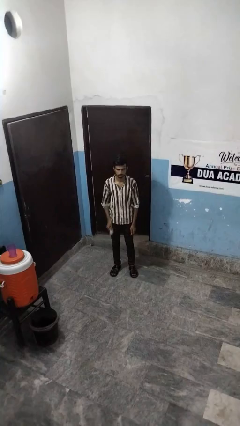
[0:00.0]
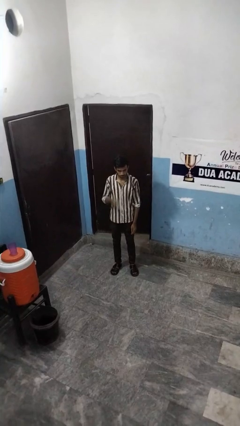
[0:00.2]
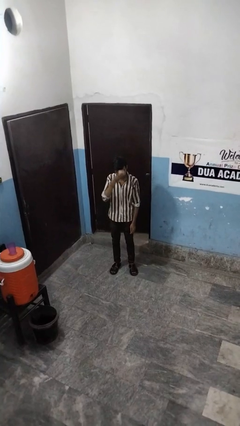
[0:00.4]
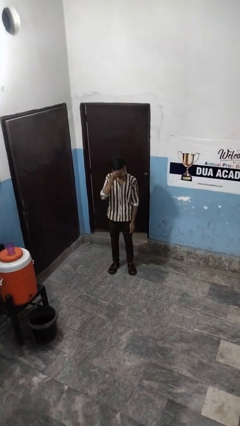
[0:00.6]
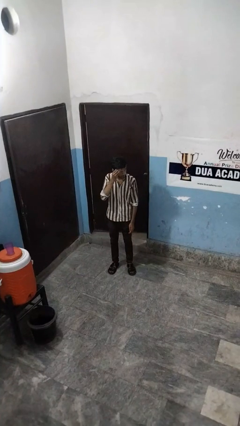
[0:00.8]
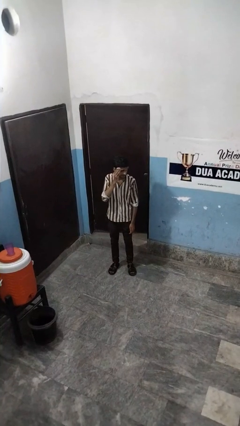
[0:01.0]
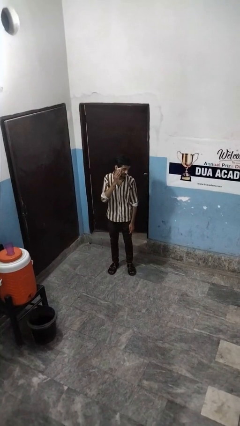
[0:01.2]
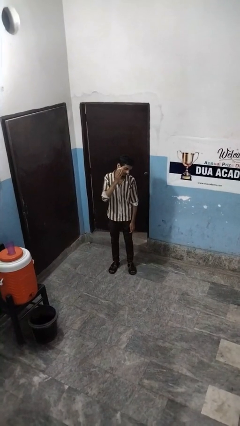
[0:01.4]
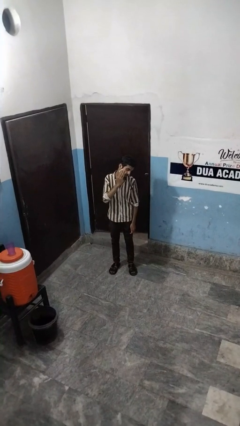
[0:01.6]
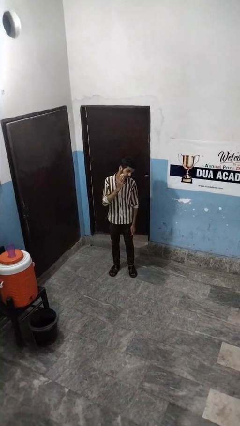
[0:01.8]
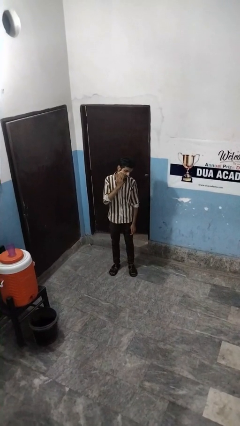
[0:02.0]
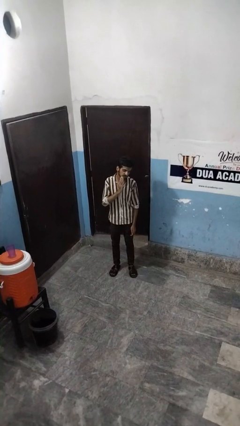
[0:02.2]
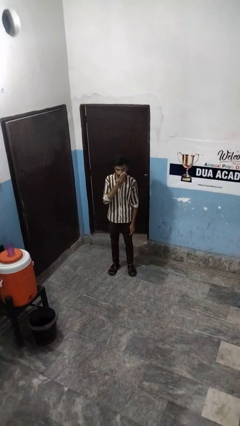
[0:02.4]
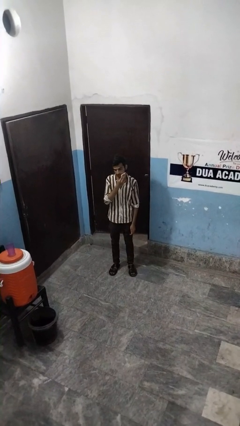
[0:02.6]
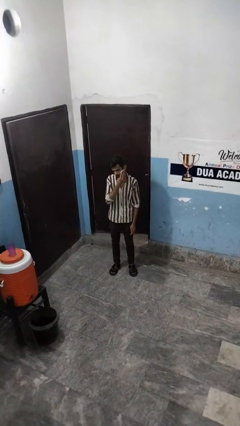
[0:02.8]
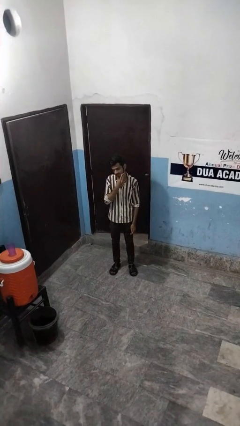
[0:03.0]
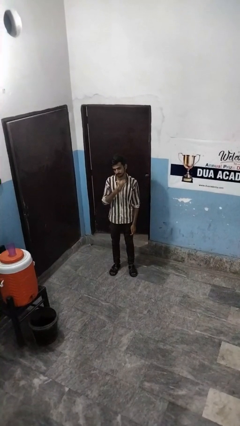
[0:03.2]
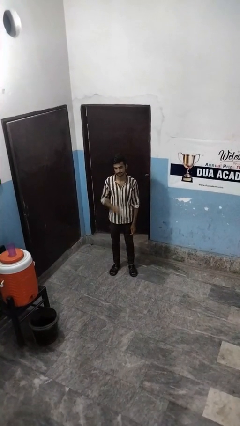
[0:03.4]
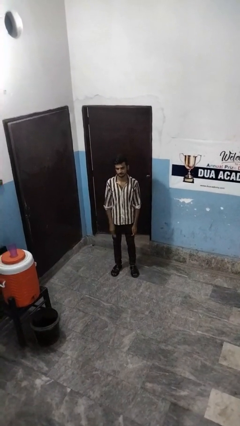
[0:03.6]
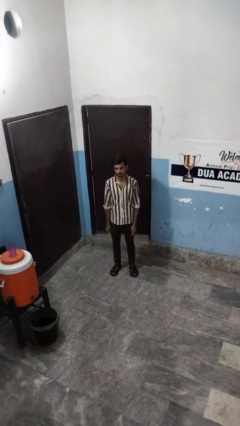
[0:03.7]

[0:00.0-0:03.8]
person wipes mouth with napkin

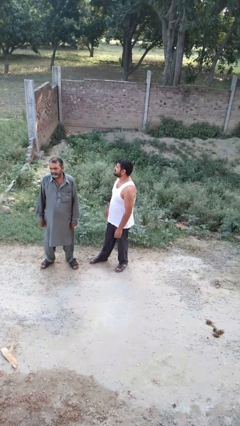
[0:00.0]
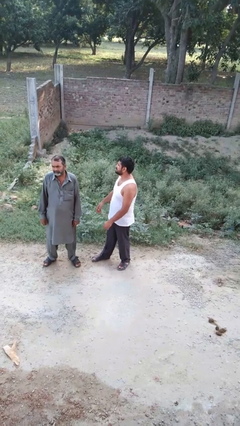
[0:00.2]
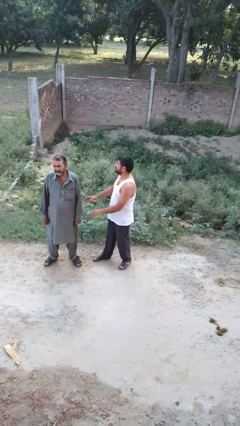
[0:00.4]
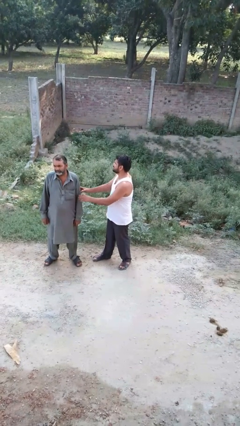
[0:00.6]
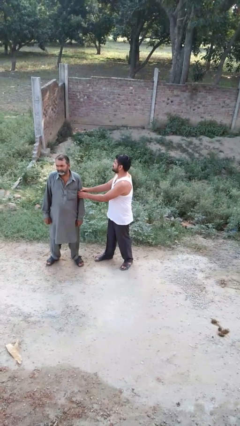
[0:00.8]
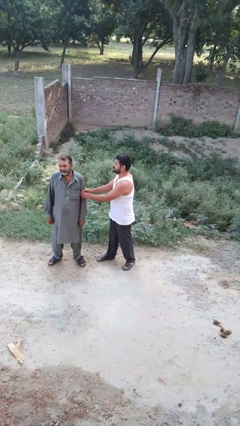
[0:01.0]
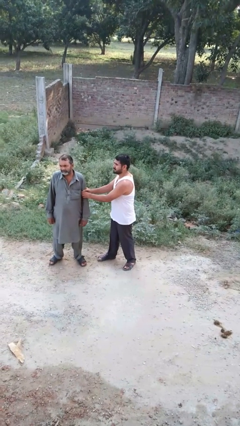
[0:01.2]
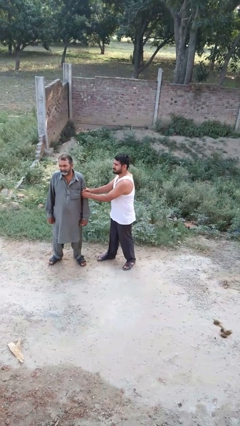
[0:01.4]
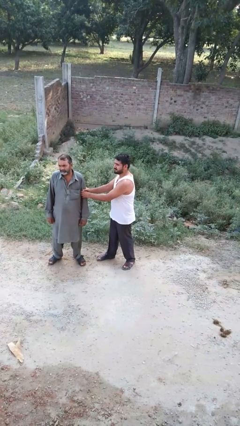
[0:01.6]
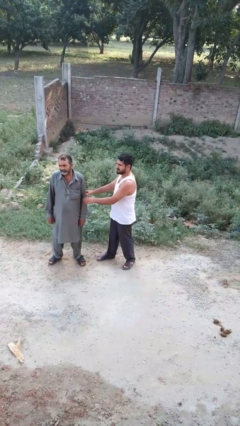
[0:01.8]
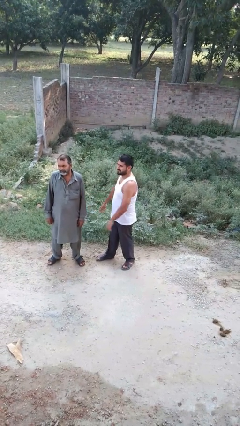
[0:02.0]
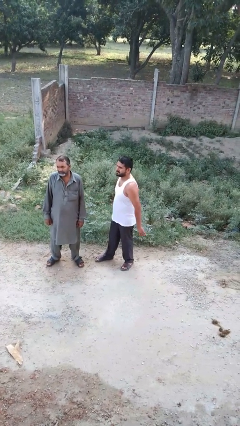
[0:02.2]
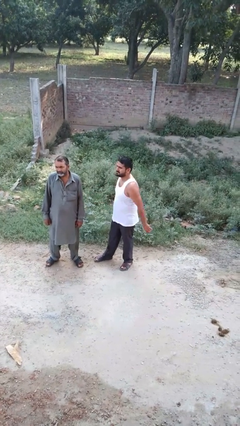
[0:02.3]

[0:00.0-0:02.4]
person grabs person by forearm

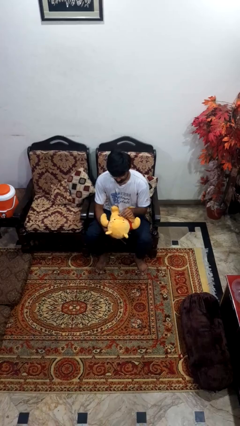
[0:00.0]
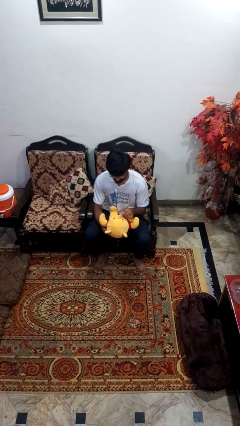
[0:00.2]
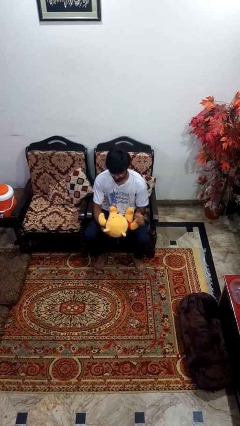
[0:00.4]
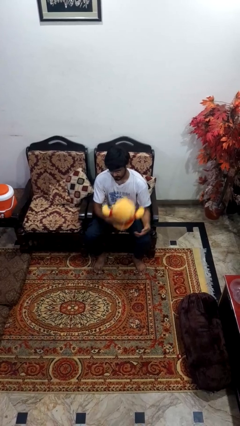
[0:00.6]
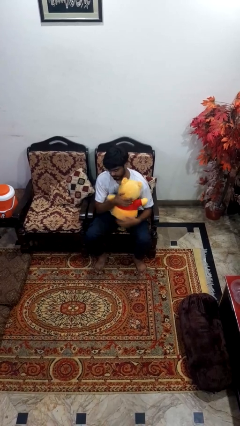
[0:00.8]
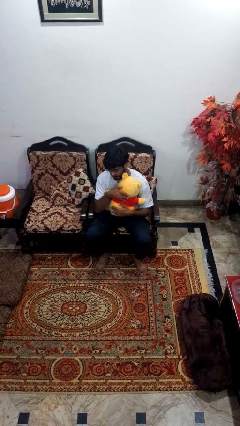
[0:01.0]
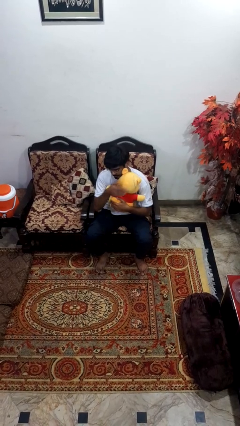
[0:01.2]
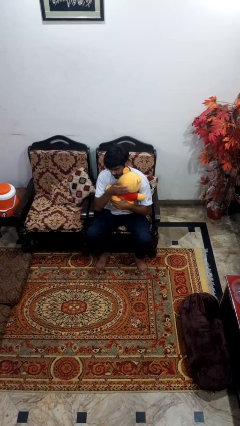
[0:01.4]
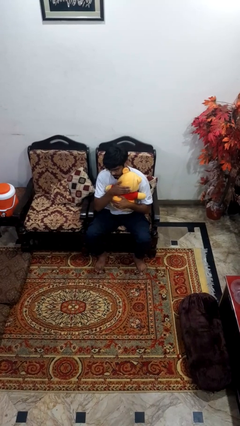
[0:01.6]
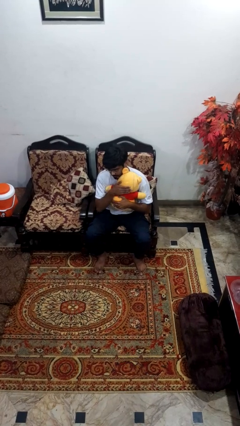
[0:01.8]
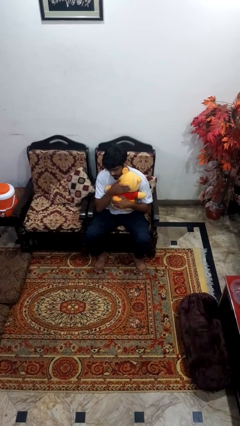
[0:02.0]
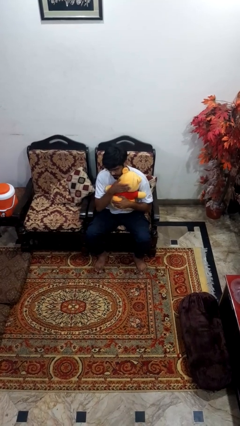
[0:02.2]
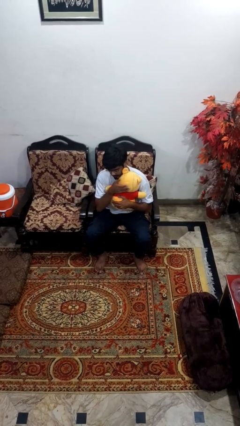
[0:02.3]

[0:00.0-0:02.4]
person hugs stuffed animal

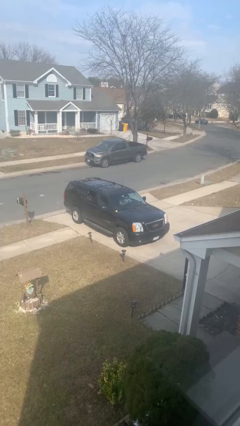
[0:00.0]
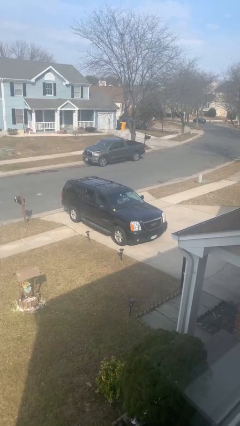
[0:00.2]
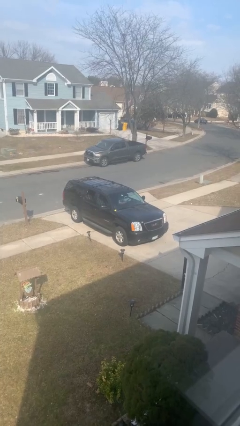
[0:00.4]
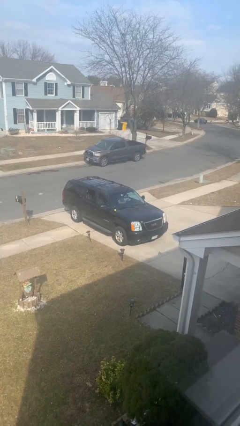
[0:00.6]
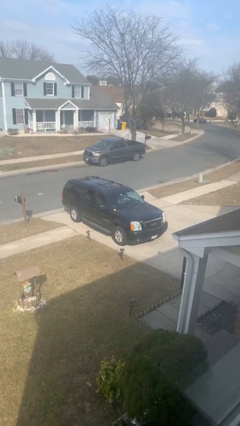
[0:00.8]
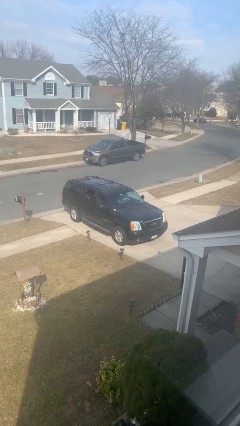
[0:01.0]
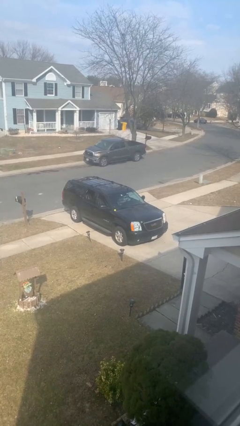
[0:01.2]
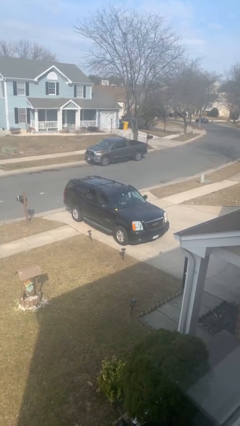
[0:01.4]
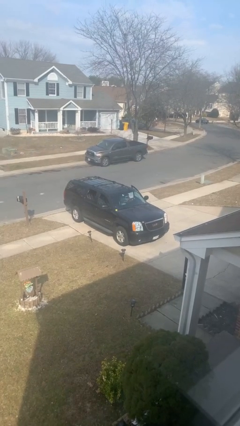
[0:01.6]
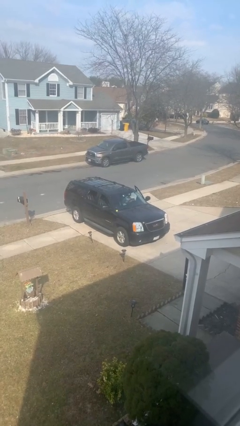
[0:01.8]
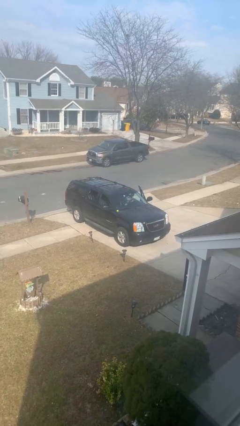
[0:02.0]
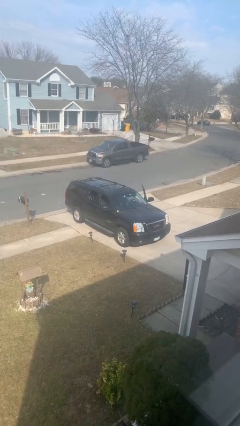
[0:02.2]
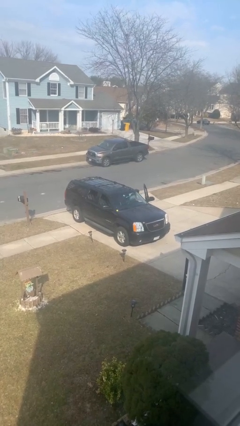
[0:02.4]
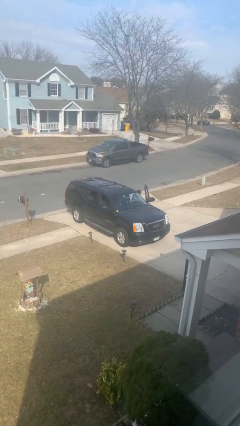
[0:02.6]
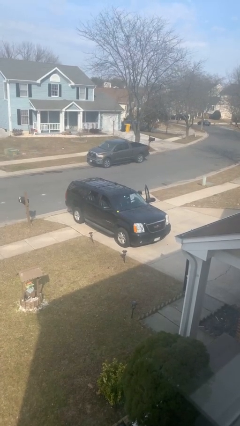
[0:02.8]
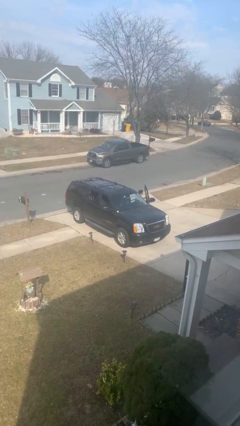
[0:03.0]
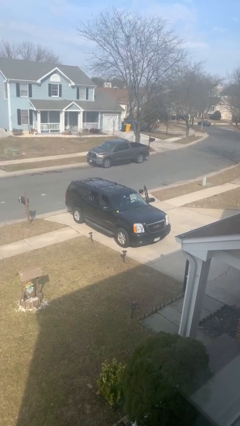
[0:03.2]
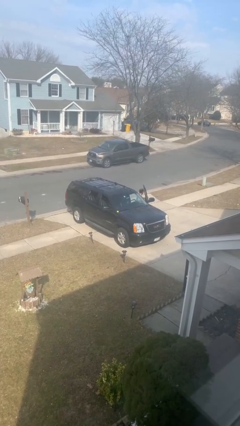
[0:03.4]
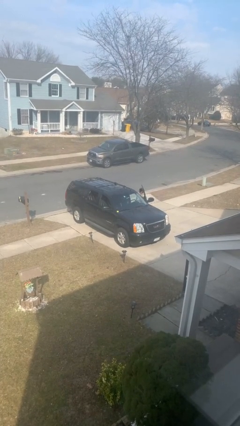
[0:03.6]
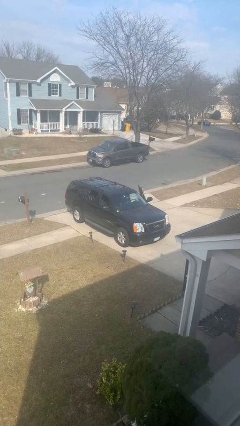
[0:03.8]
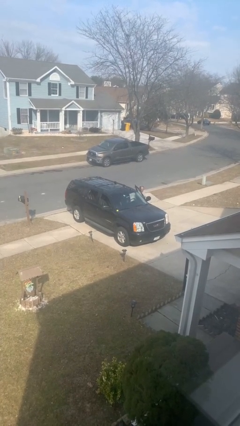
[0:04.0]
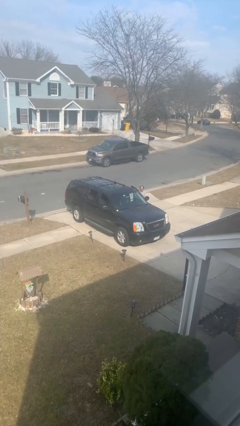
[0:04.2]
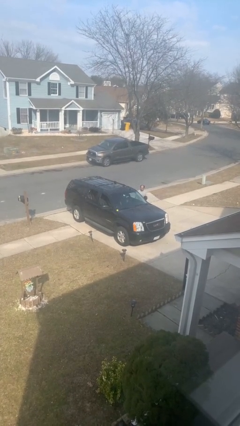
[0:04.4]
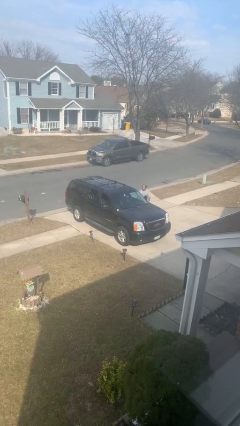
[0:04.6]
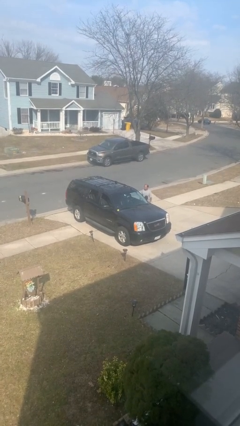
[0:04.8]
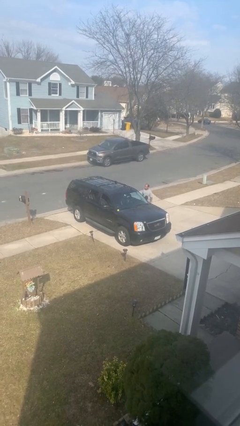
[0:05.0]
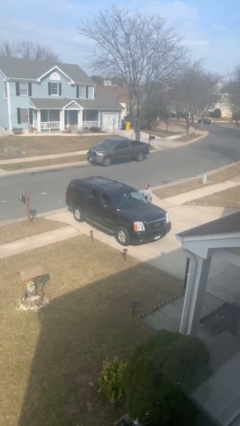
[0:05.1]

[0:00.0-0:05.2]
car drops off person

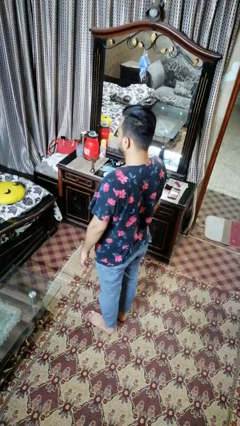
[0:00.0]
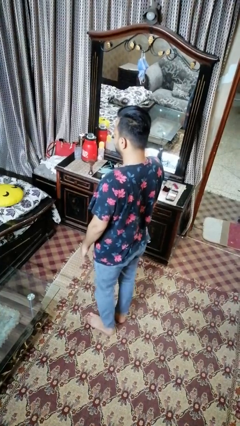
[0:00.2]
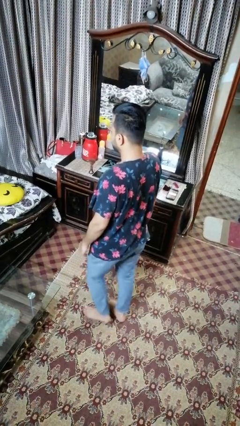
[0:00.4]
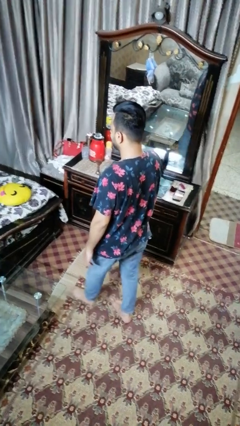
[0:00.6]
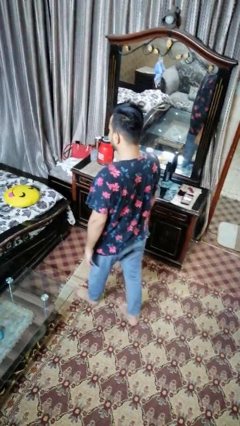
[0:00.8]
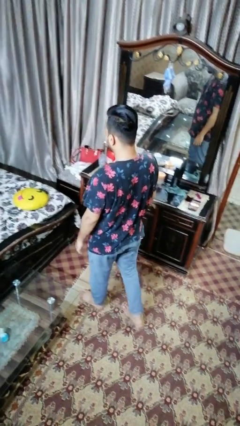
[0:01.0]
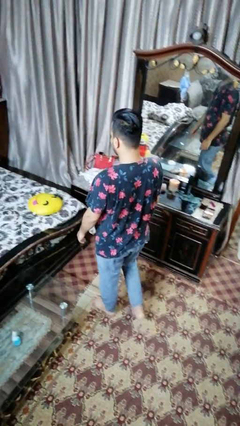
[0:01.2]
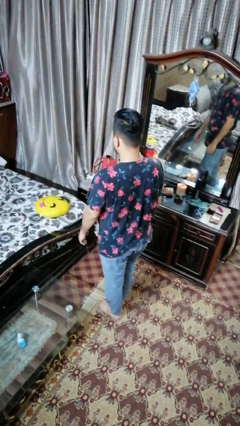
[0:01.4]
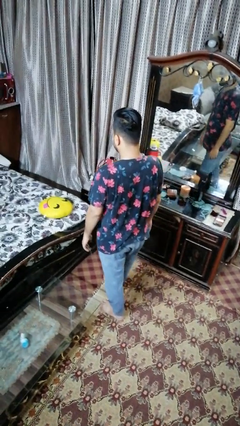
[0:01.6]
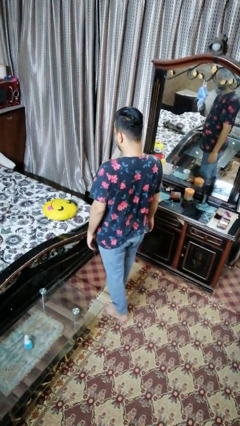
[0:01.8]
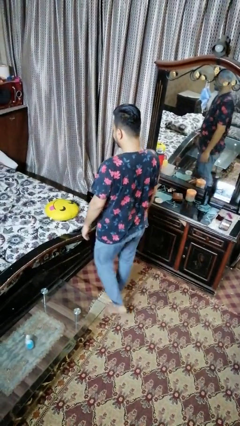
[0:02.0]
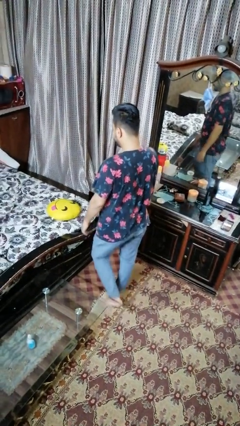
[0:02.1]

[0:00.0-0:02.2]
person picks up object from bed

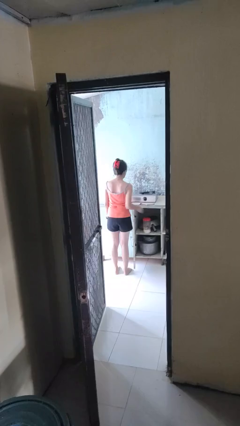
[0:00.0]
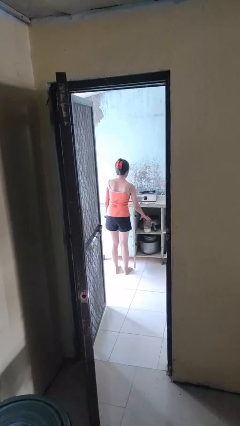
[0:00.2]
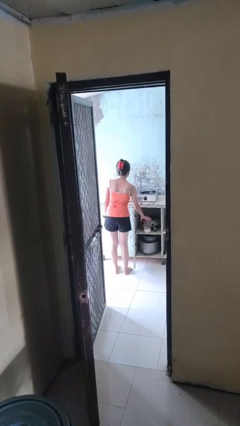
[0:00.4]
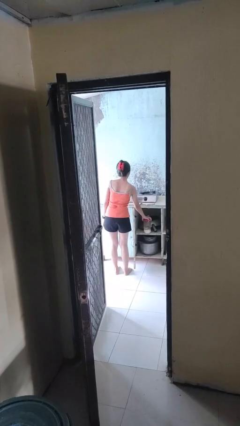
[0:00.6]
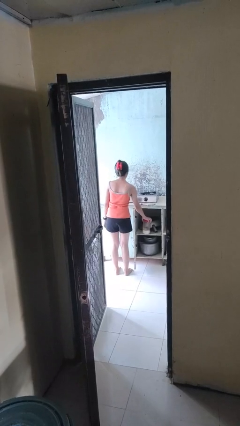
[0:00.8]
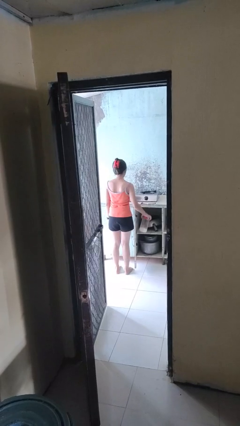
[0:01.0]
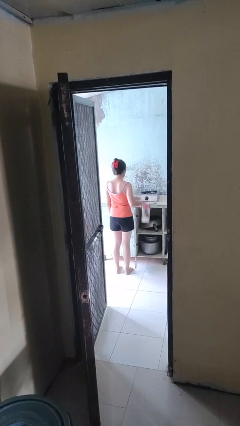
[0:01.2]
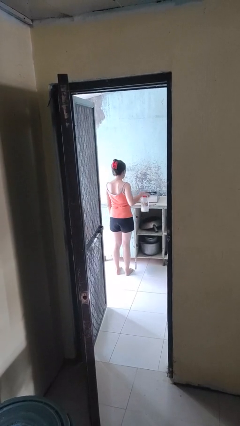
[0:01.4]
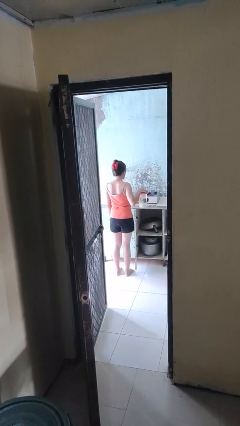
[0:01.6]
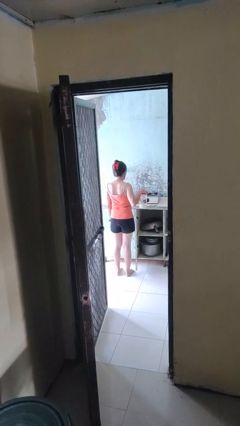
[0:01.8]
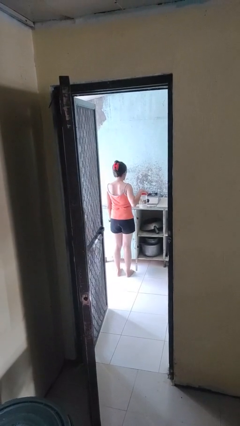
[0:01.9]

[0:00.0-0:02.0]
person picks up object from cabinet
